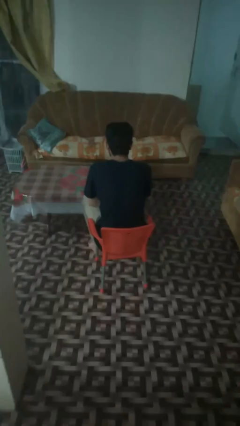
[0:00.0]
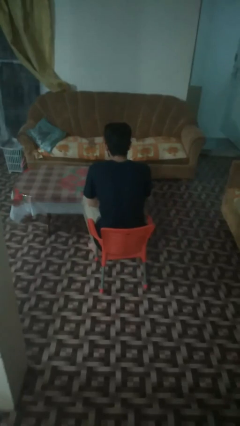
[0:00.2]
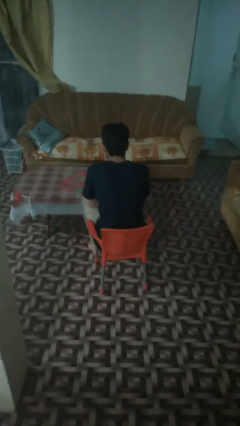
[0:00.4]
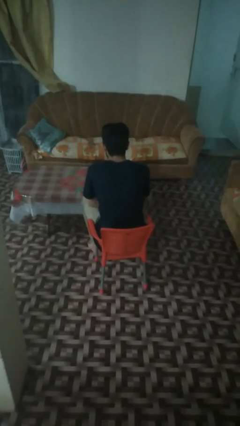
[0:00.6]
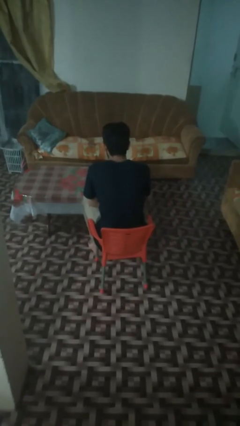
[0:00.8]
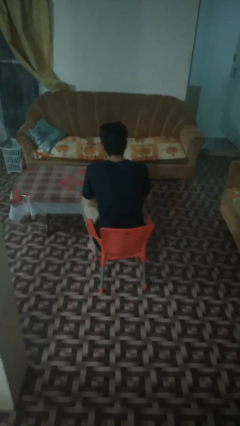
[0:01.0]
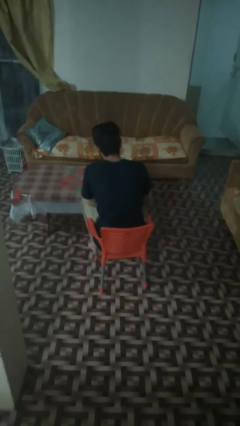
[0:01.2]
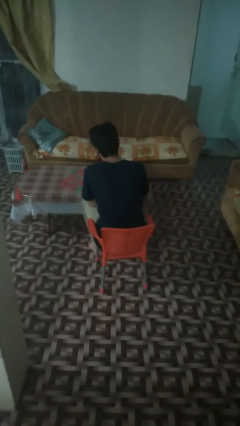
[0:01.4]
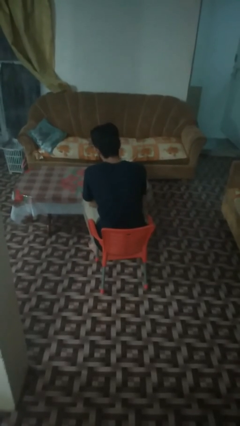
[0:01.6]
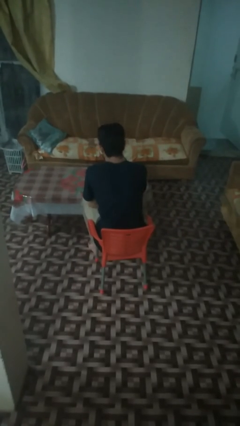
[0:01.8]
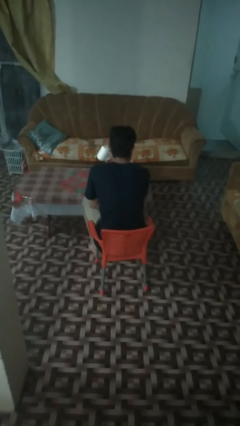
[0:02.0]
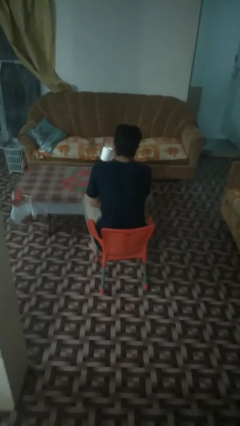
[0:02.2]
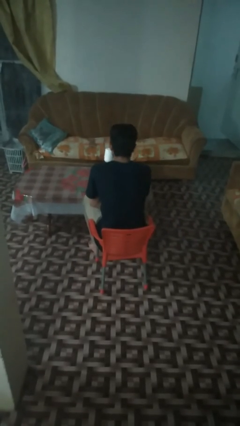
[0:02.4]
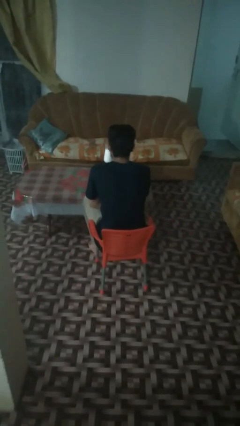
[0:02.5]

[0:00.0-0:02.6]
person picks up object from table

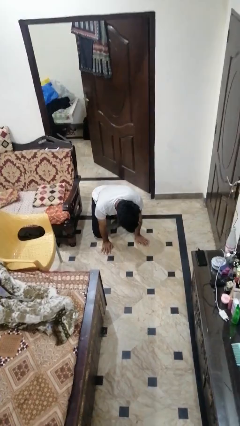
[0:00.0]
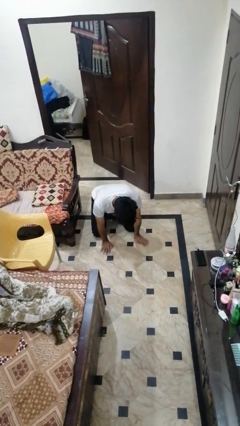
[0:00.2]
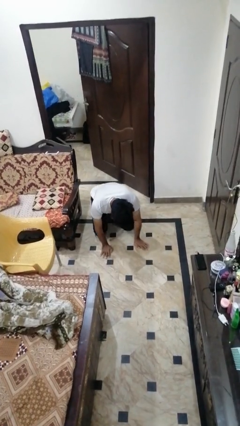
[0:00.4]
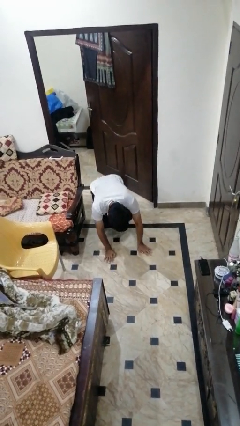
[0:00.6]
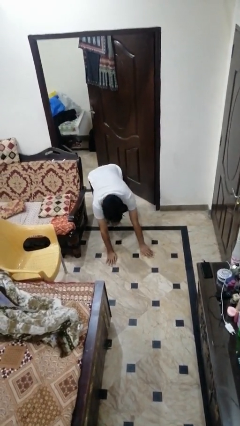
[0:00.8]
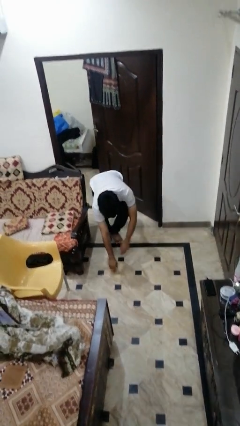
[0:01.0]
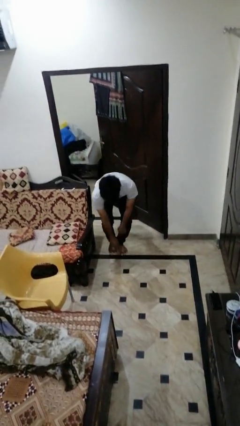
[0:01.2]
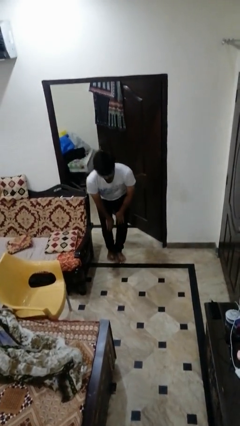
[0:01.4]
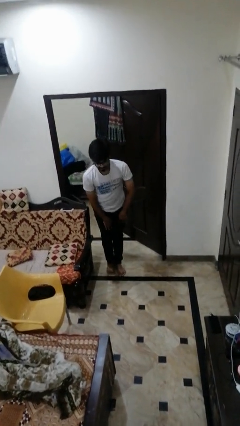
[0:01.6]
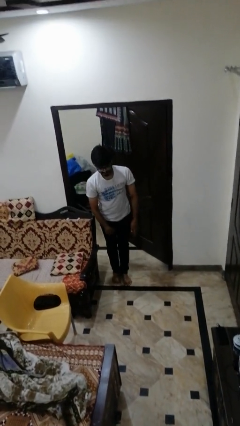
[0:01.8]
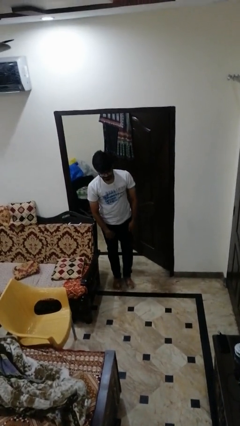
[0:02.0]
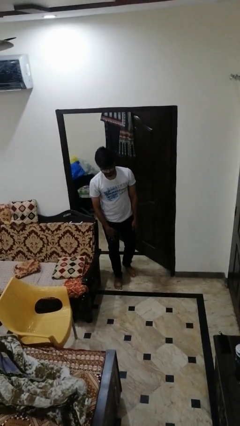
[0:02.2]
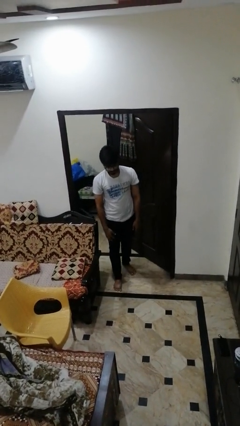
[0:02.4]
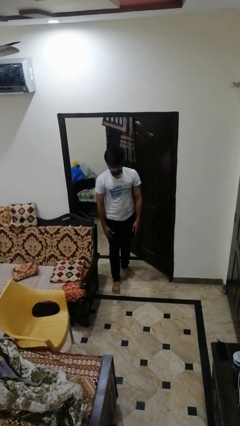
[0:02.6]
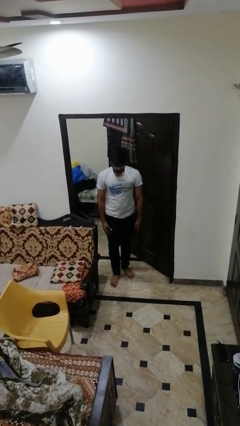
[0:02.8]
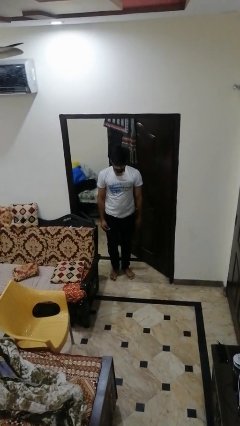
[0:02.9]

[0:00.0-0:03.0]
person stands up from floor

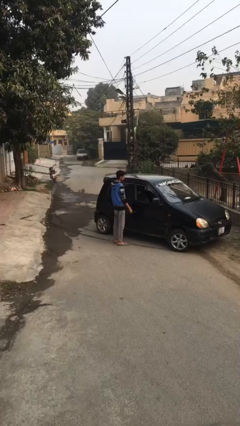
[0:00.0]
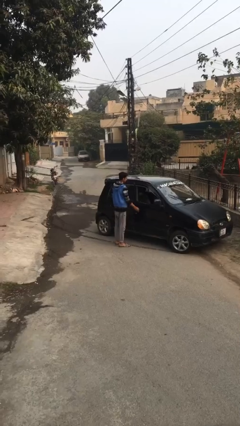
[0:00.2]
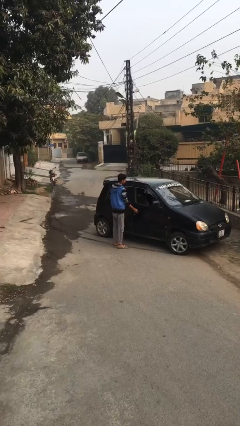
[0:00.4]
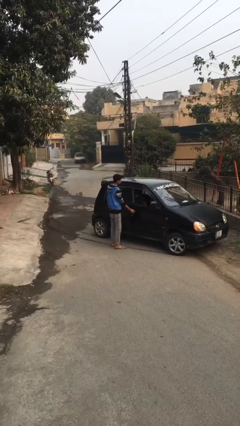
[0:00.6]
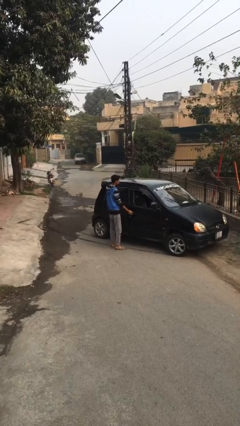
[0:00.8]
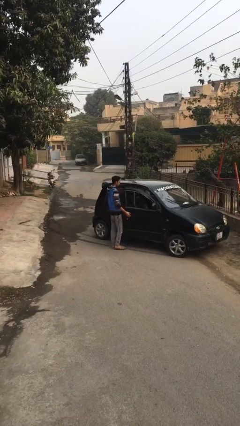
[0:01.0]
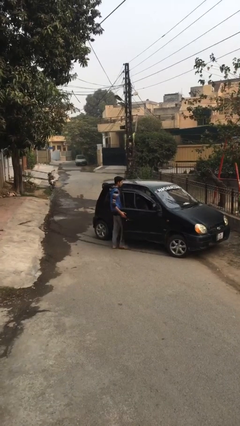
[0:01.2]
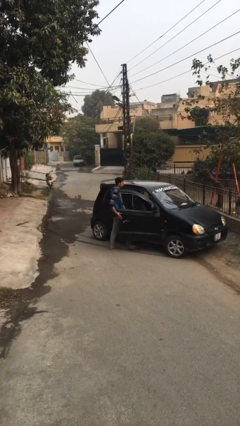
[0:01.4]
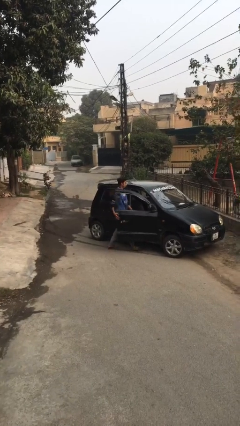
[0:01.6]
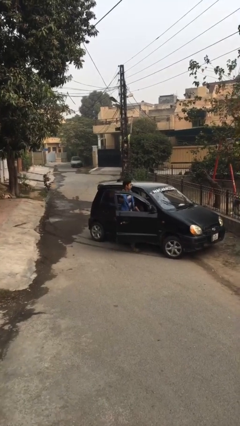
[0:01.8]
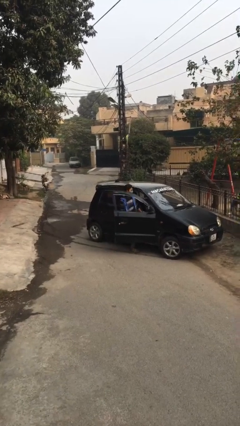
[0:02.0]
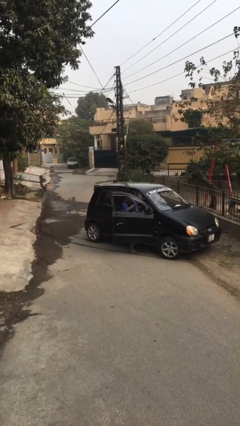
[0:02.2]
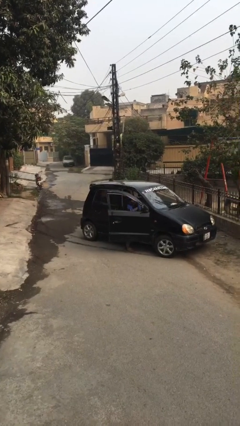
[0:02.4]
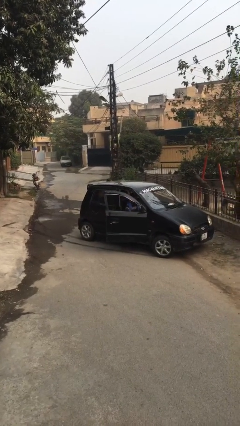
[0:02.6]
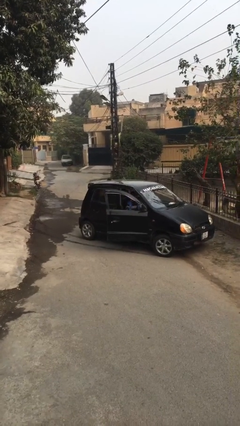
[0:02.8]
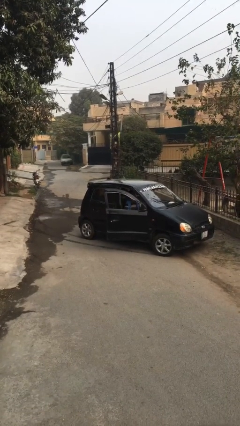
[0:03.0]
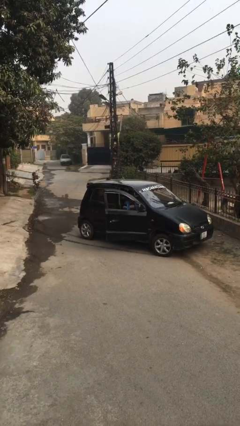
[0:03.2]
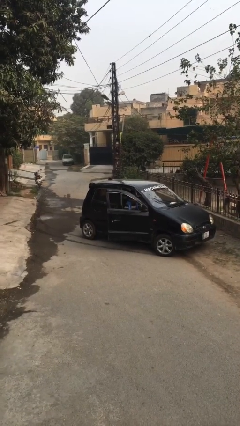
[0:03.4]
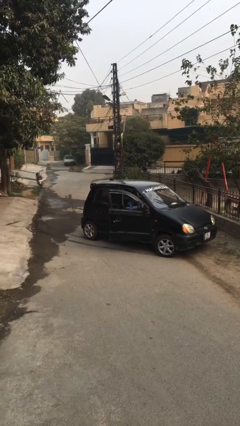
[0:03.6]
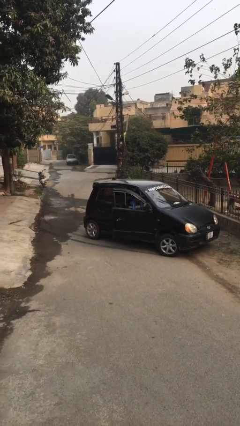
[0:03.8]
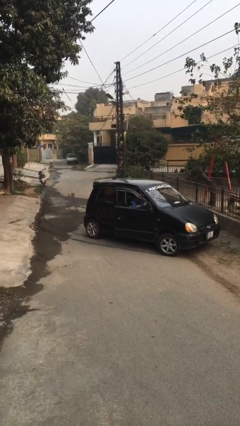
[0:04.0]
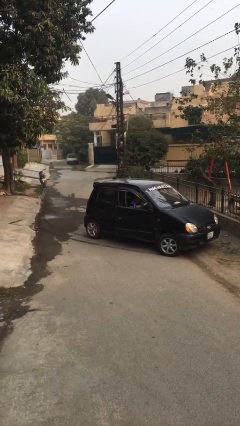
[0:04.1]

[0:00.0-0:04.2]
person enters car

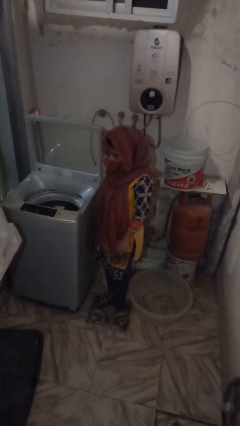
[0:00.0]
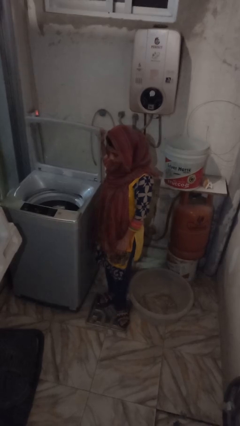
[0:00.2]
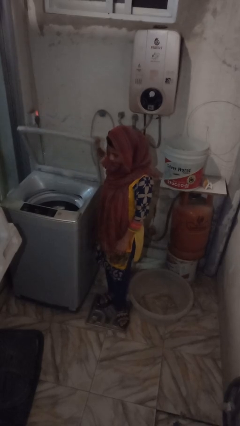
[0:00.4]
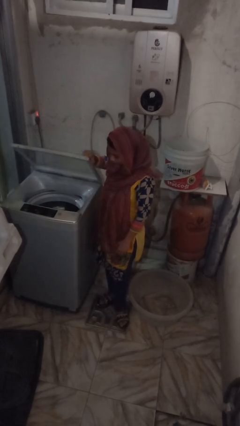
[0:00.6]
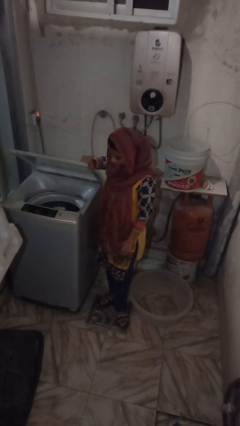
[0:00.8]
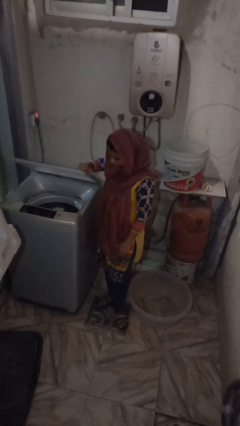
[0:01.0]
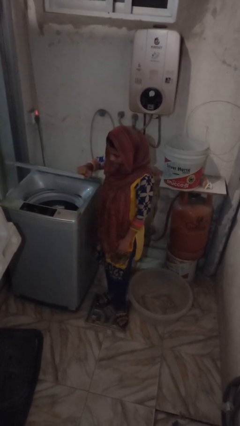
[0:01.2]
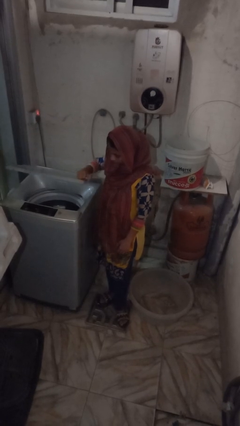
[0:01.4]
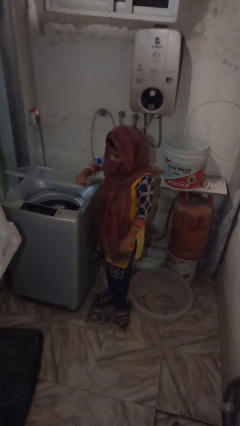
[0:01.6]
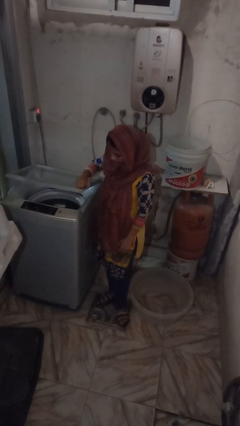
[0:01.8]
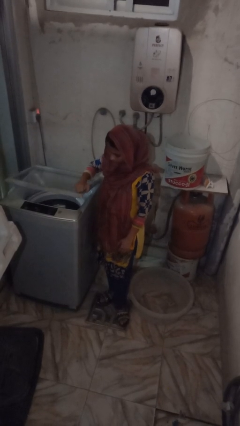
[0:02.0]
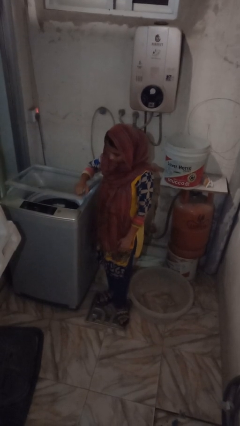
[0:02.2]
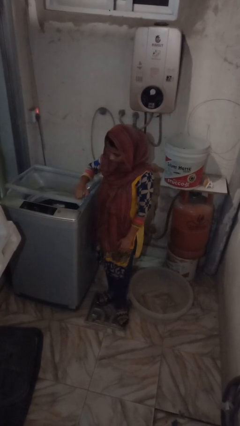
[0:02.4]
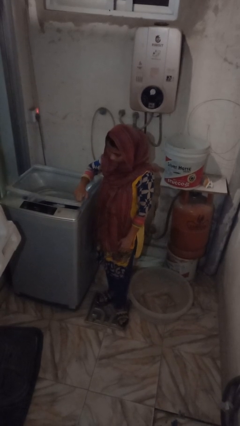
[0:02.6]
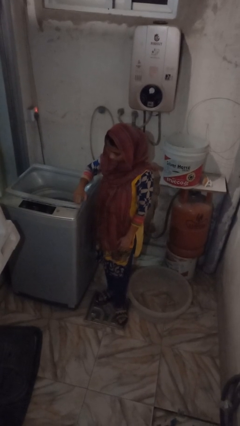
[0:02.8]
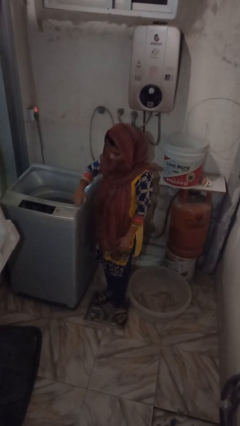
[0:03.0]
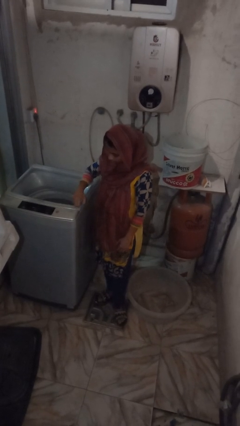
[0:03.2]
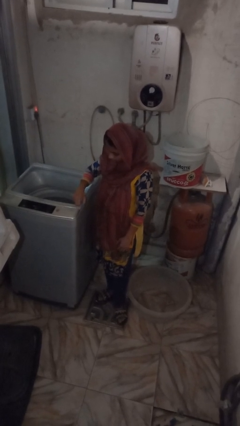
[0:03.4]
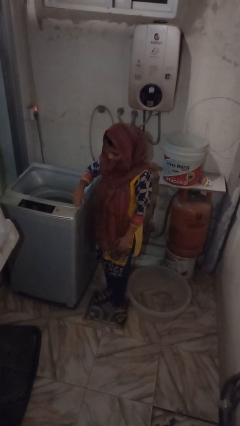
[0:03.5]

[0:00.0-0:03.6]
person closes clothes washer

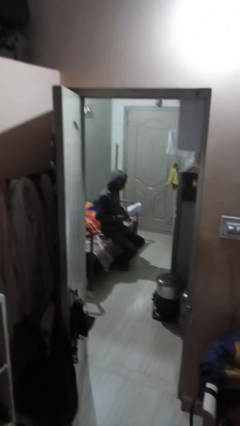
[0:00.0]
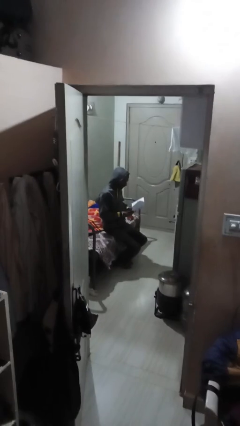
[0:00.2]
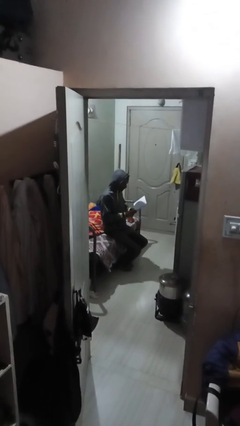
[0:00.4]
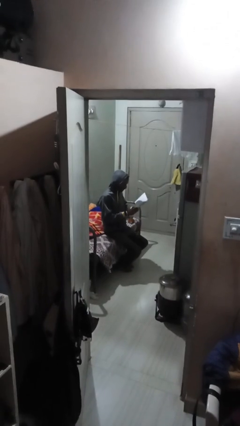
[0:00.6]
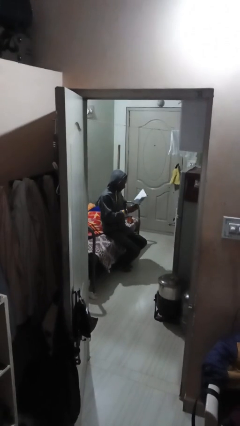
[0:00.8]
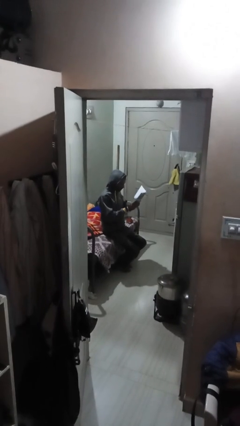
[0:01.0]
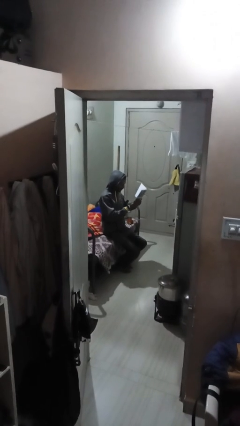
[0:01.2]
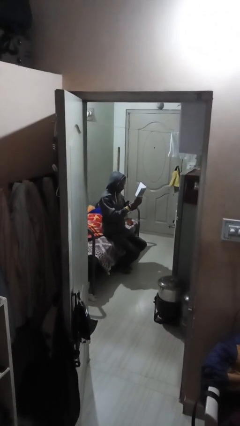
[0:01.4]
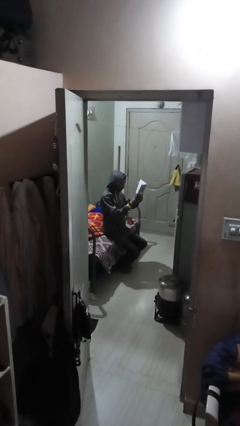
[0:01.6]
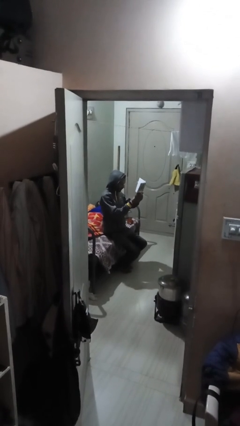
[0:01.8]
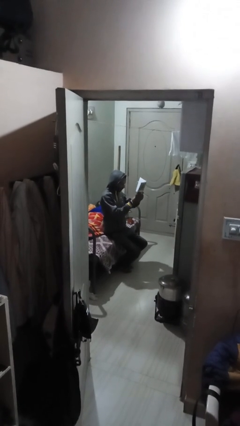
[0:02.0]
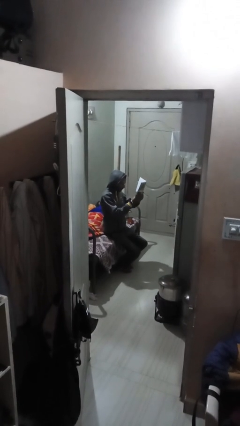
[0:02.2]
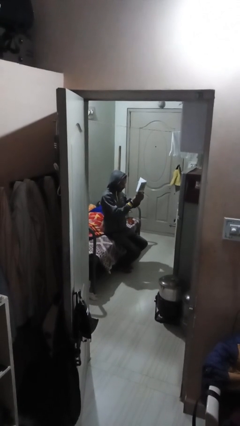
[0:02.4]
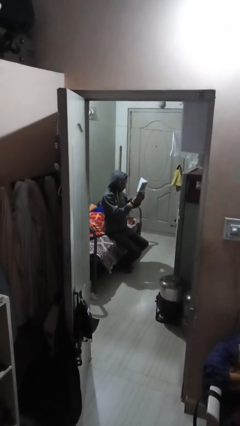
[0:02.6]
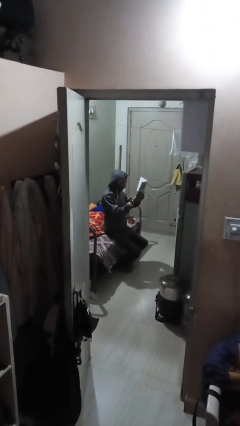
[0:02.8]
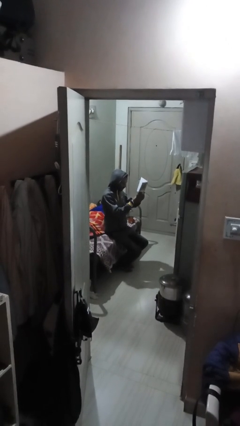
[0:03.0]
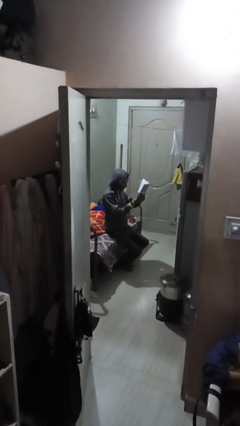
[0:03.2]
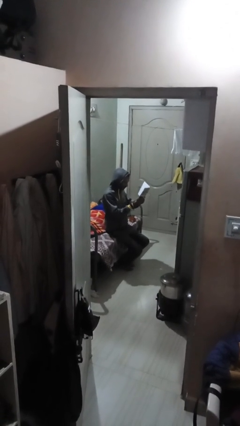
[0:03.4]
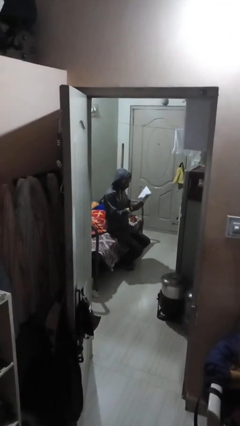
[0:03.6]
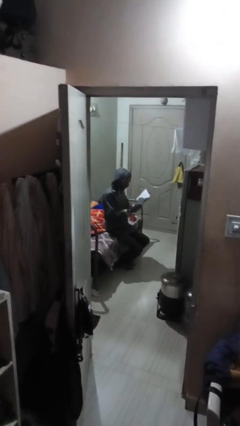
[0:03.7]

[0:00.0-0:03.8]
person reads document

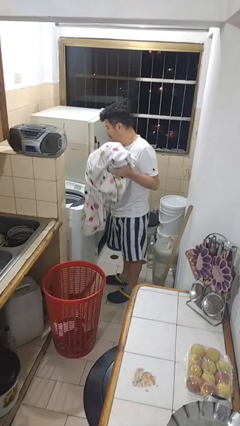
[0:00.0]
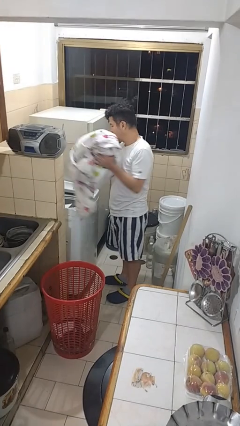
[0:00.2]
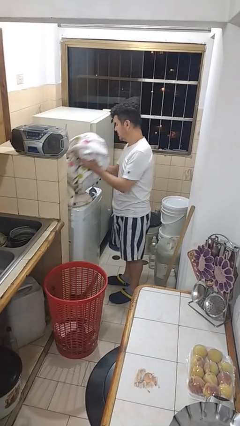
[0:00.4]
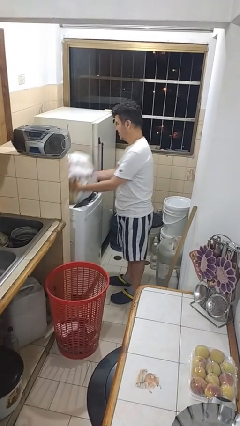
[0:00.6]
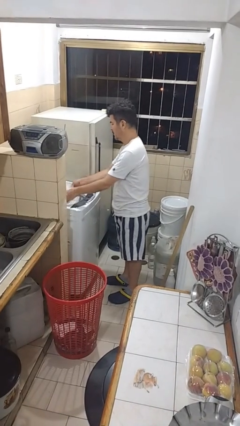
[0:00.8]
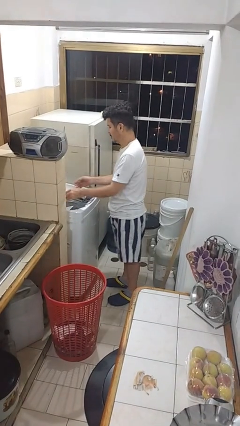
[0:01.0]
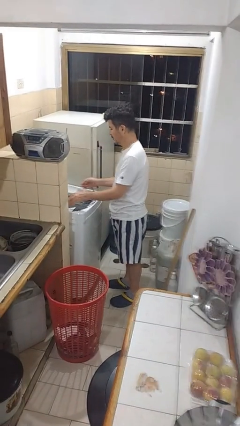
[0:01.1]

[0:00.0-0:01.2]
person loads clotheswasher
